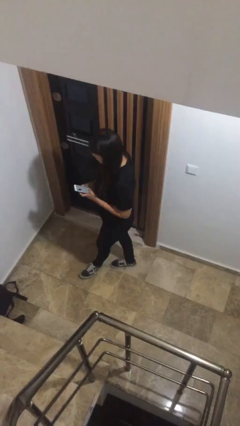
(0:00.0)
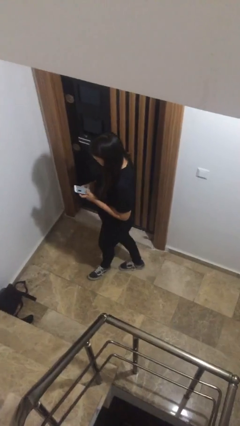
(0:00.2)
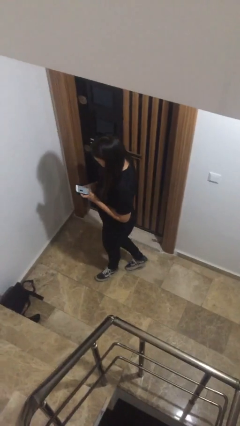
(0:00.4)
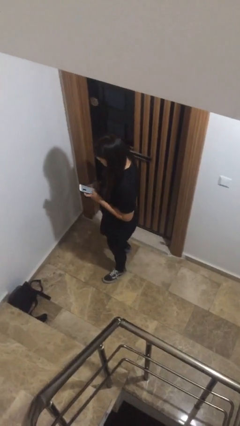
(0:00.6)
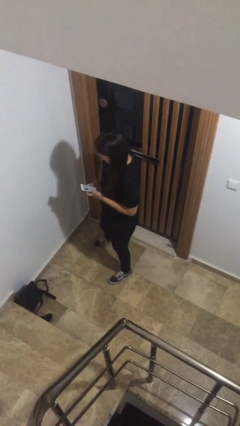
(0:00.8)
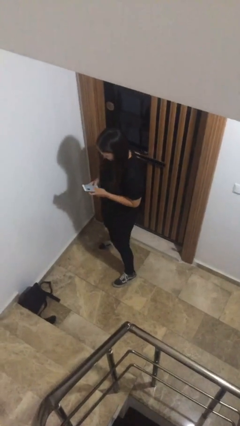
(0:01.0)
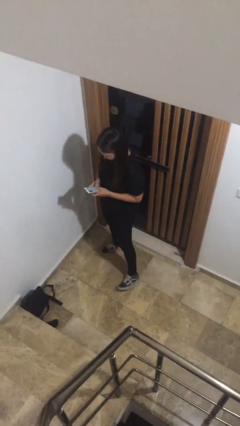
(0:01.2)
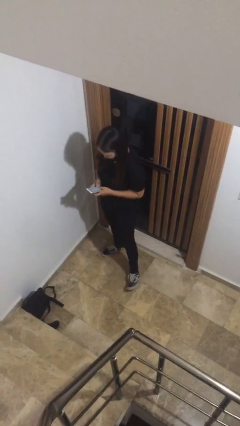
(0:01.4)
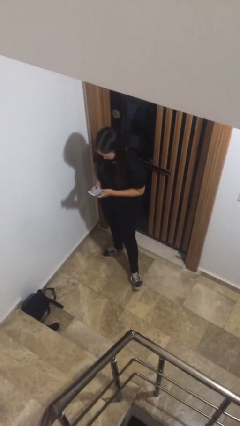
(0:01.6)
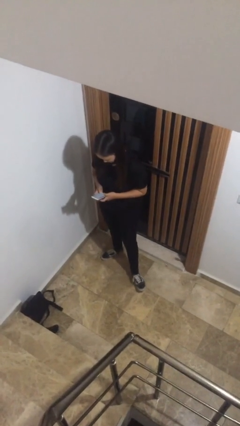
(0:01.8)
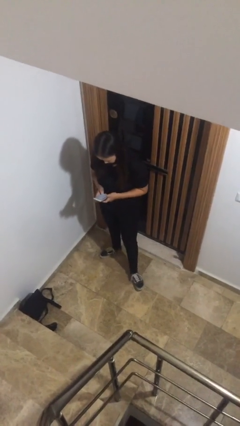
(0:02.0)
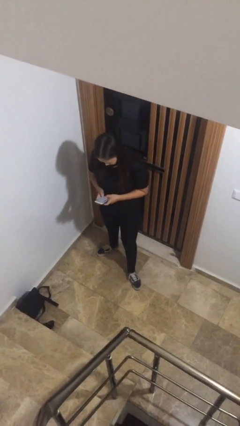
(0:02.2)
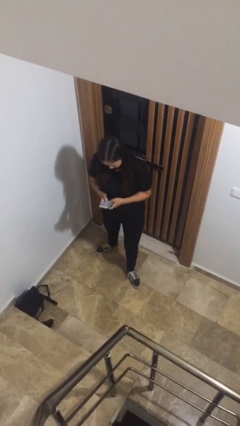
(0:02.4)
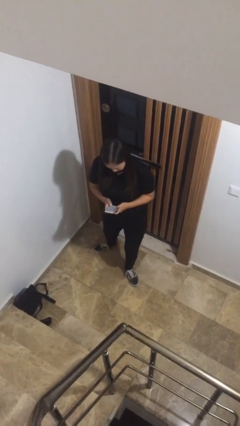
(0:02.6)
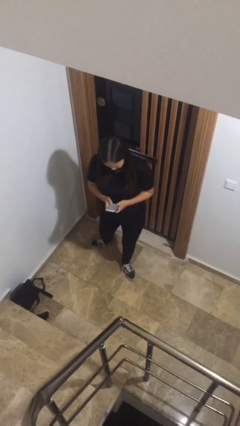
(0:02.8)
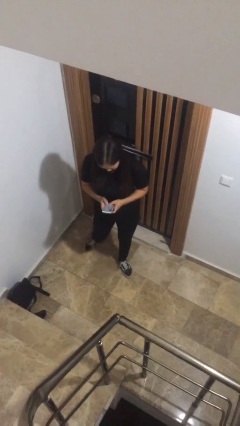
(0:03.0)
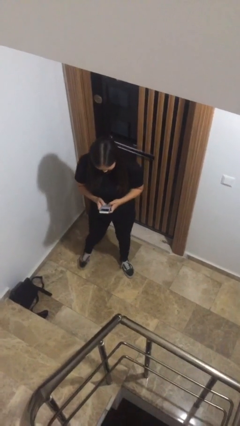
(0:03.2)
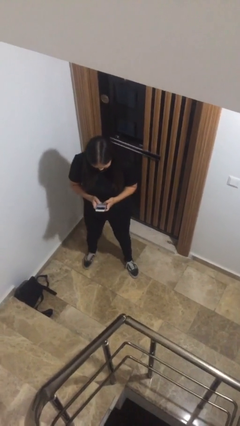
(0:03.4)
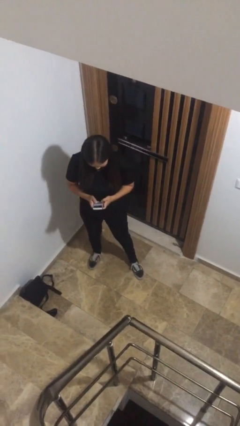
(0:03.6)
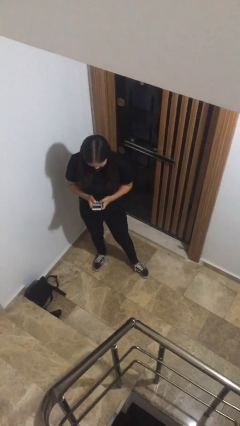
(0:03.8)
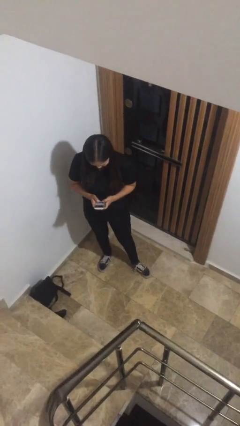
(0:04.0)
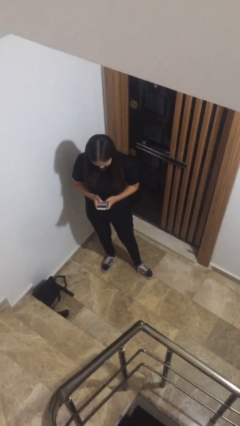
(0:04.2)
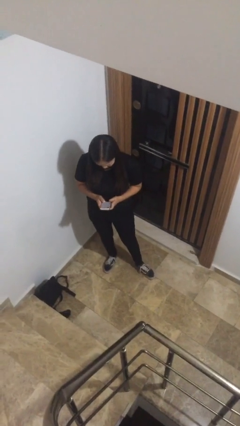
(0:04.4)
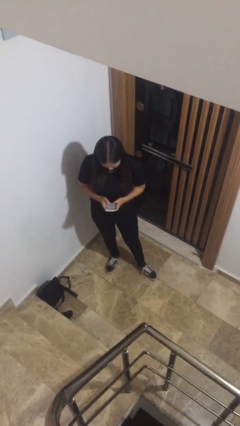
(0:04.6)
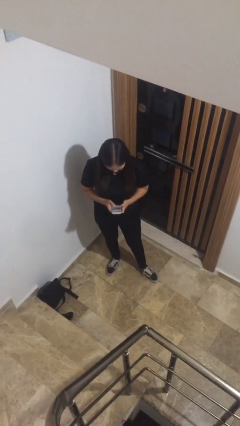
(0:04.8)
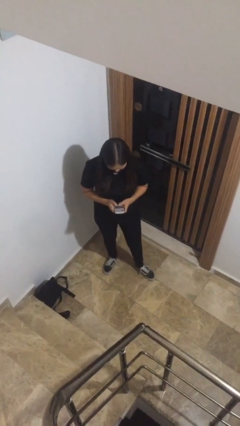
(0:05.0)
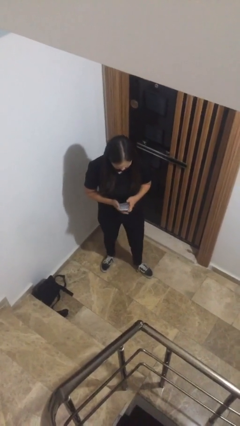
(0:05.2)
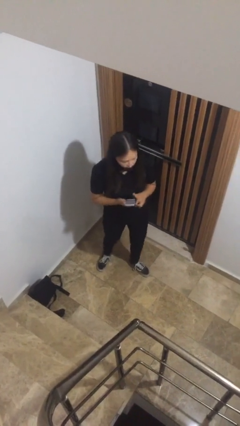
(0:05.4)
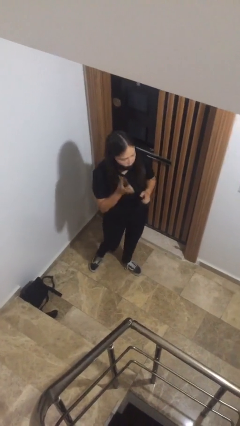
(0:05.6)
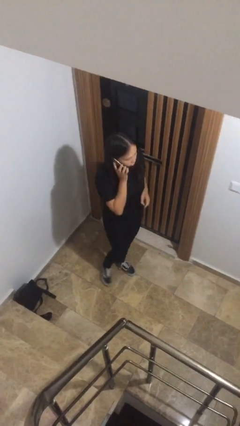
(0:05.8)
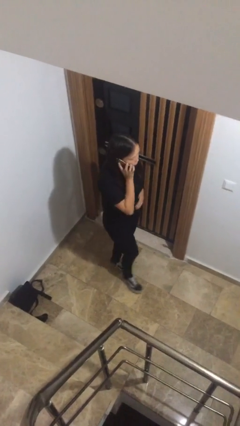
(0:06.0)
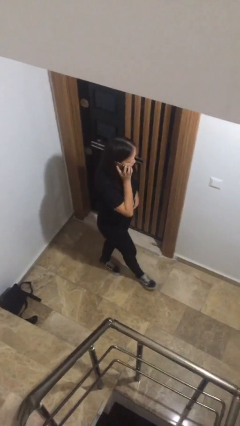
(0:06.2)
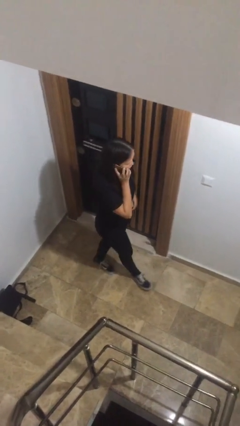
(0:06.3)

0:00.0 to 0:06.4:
person texts on phone

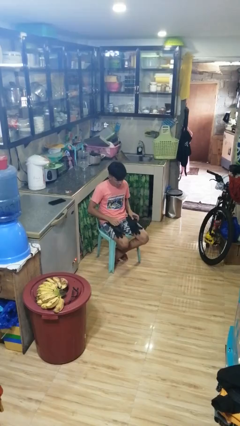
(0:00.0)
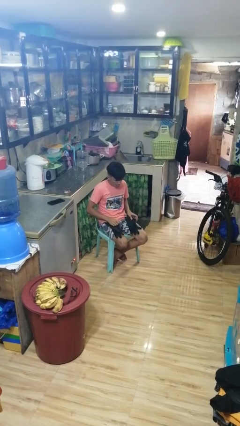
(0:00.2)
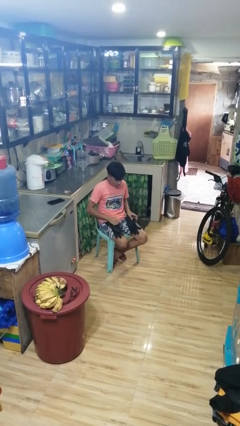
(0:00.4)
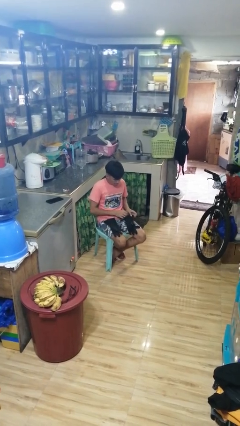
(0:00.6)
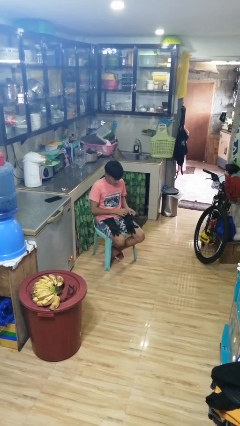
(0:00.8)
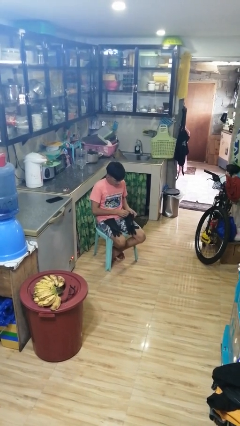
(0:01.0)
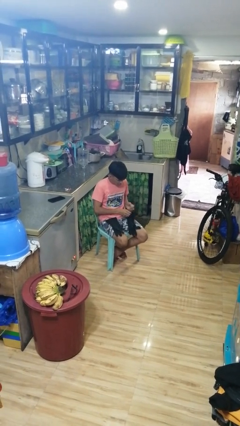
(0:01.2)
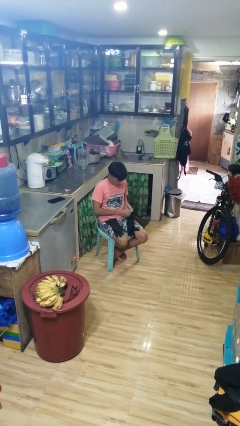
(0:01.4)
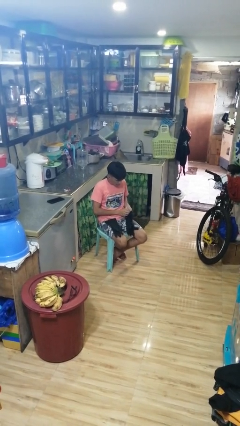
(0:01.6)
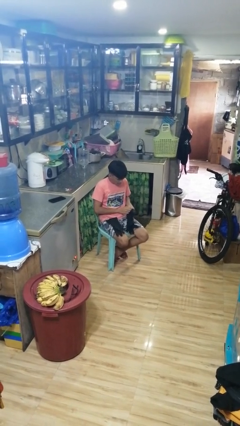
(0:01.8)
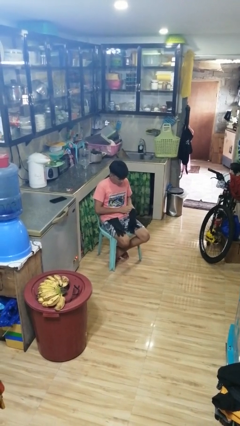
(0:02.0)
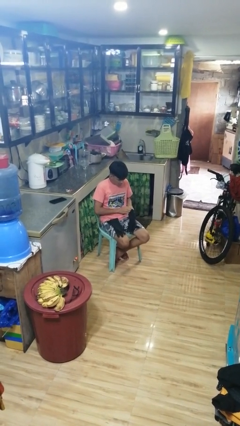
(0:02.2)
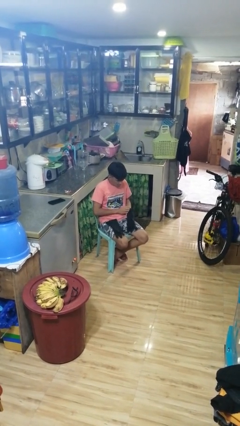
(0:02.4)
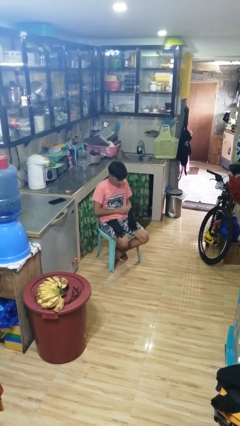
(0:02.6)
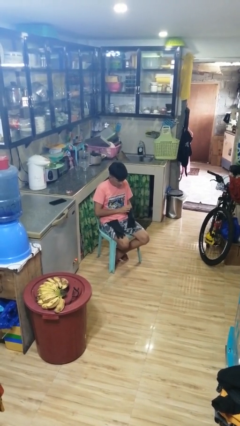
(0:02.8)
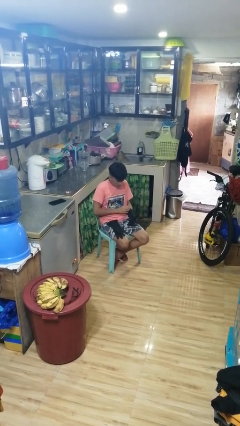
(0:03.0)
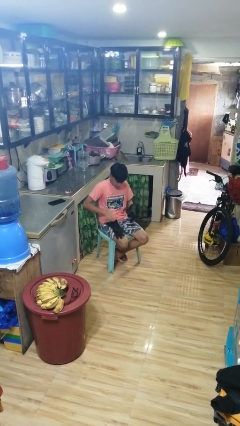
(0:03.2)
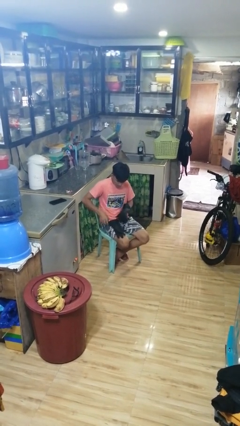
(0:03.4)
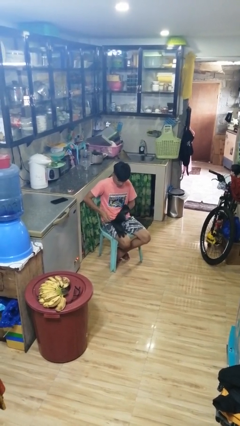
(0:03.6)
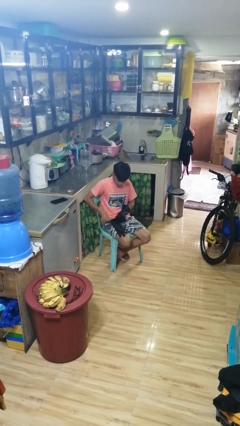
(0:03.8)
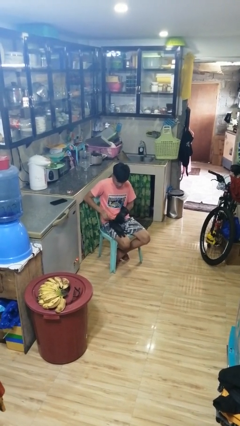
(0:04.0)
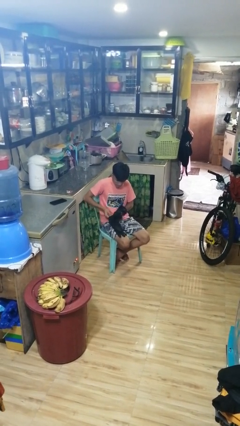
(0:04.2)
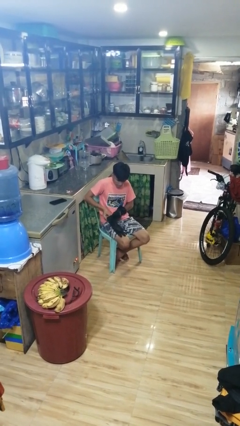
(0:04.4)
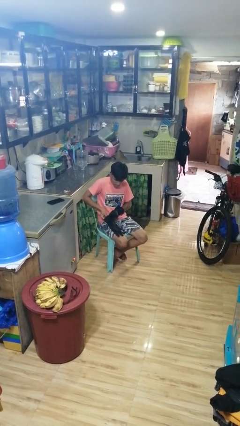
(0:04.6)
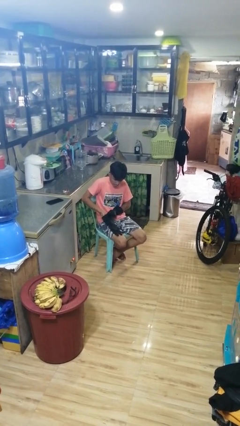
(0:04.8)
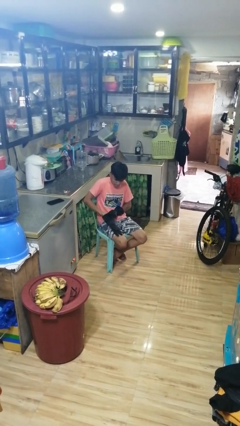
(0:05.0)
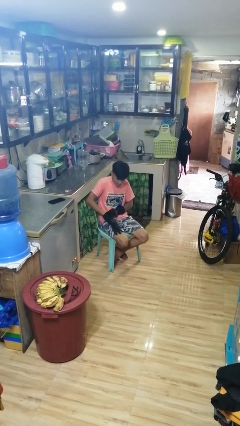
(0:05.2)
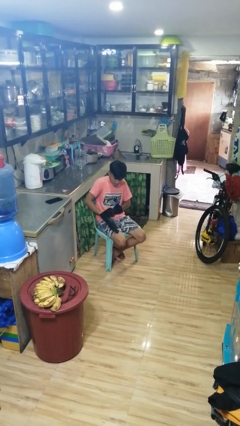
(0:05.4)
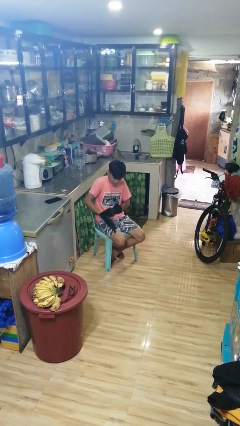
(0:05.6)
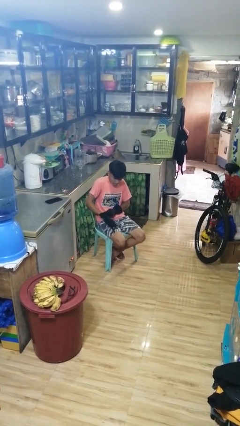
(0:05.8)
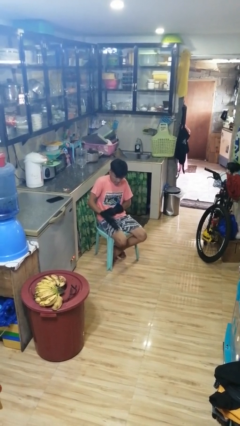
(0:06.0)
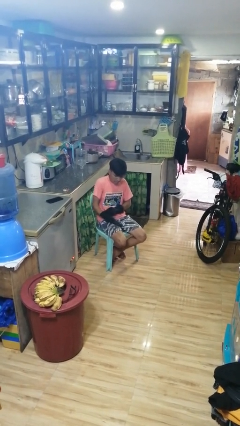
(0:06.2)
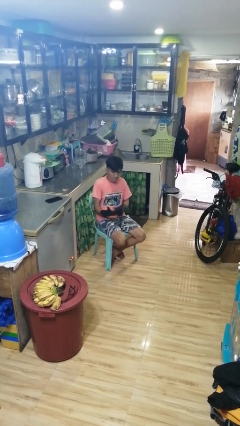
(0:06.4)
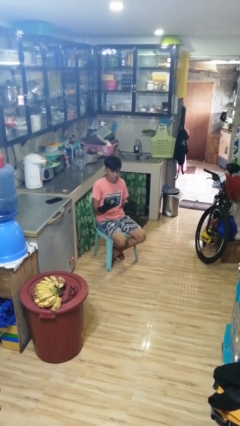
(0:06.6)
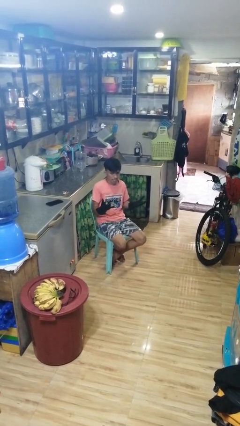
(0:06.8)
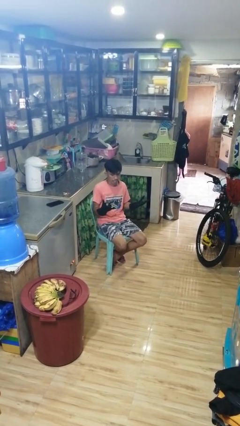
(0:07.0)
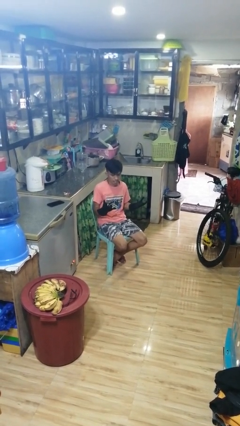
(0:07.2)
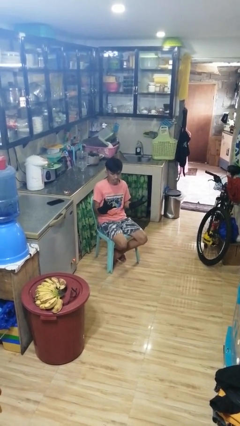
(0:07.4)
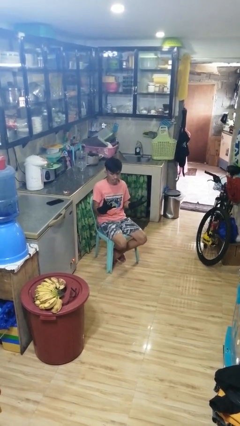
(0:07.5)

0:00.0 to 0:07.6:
person puts on gloves

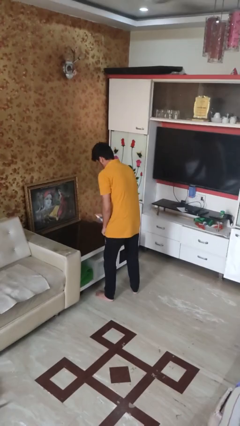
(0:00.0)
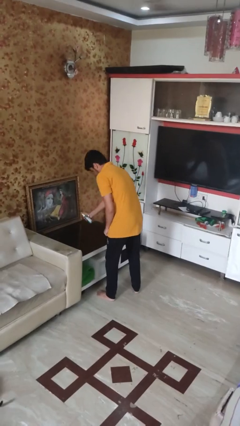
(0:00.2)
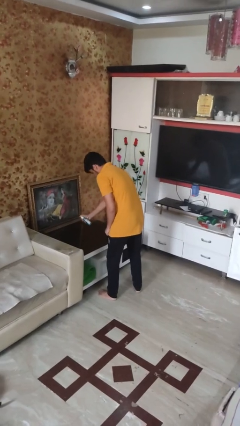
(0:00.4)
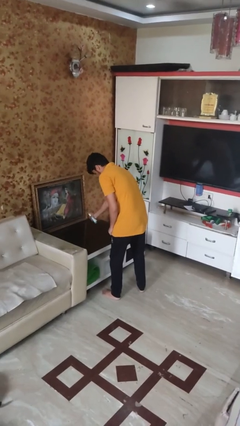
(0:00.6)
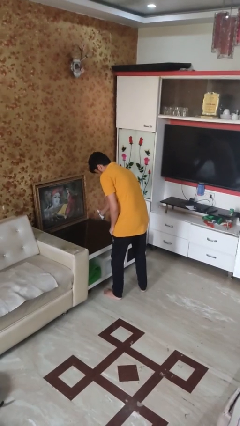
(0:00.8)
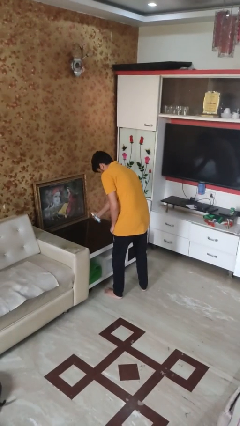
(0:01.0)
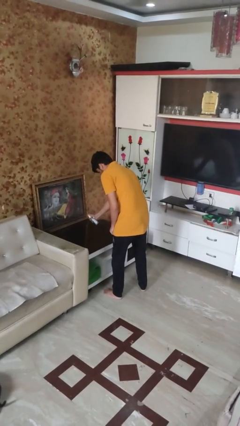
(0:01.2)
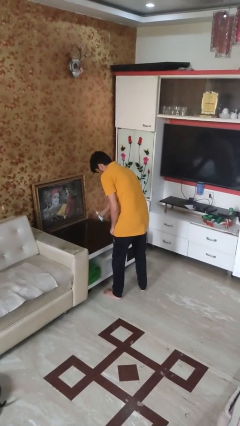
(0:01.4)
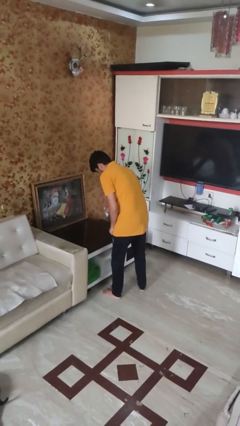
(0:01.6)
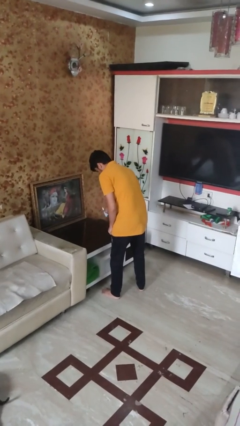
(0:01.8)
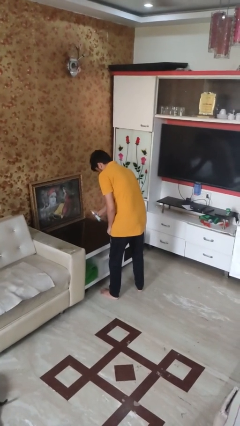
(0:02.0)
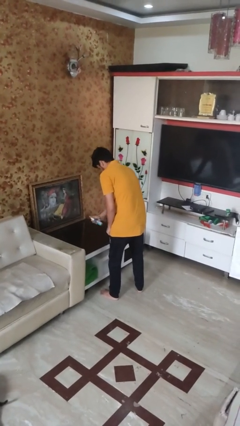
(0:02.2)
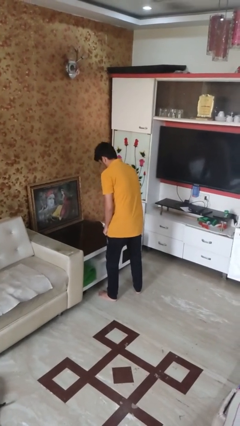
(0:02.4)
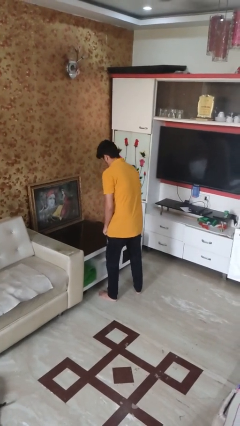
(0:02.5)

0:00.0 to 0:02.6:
person sprays from bottle

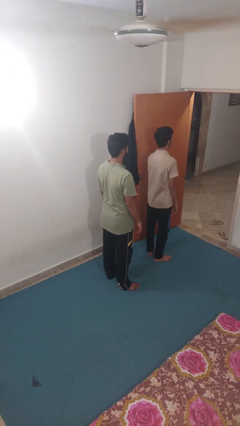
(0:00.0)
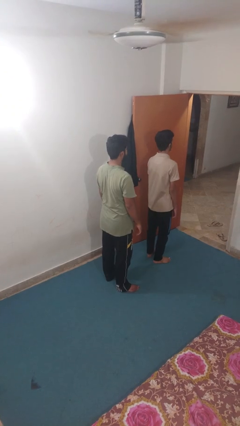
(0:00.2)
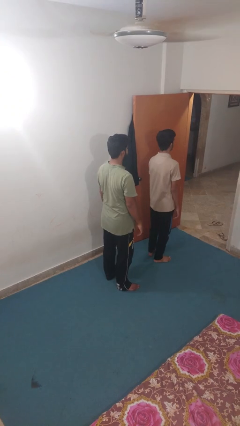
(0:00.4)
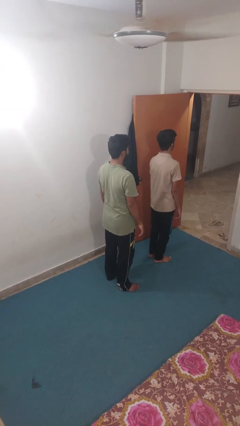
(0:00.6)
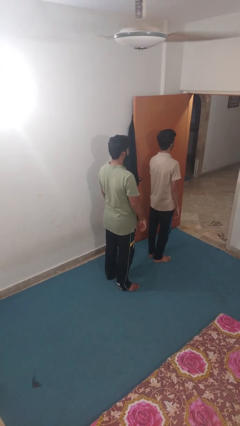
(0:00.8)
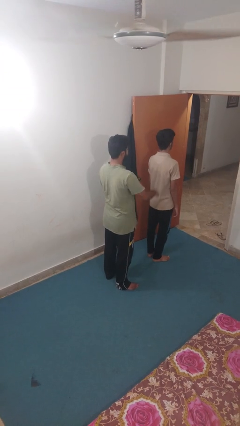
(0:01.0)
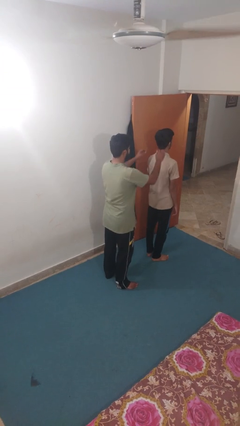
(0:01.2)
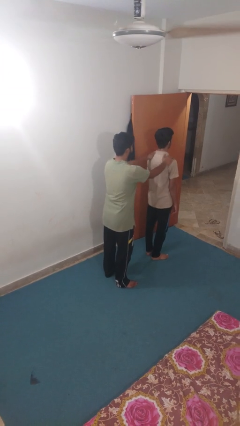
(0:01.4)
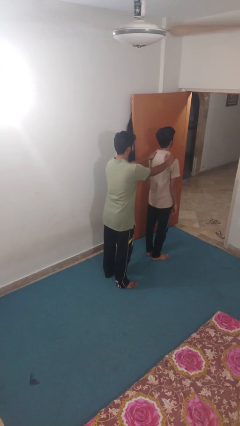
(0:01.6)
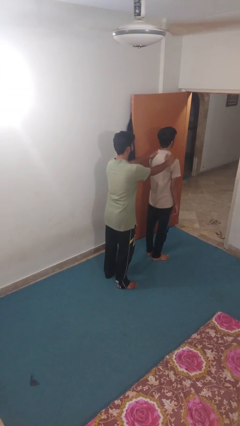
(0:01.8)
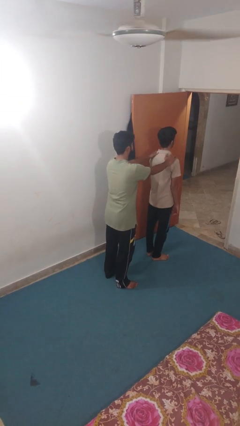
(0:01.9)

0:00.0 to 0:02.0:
person grabs person by shoulder
